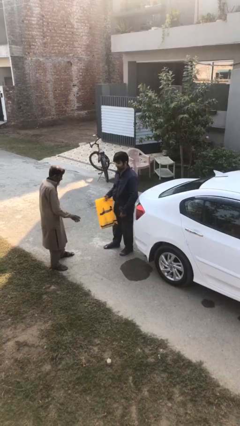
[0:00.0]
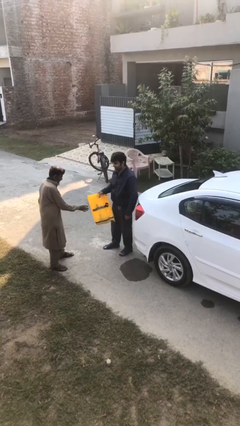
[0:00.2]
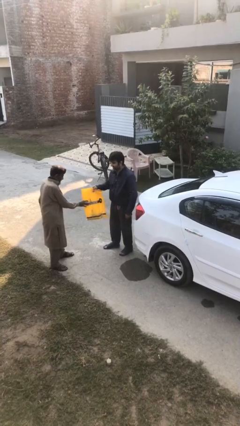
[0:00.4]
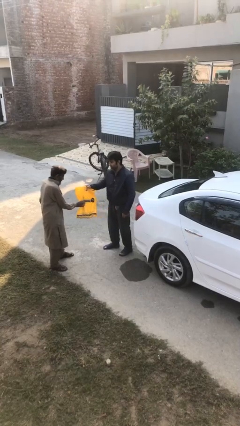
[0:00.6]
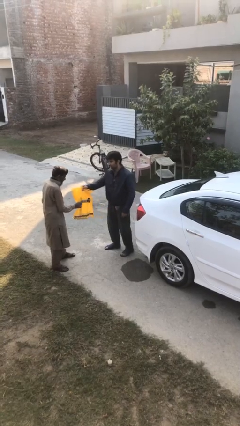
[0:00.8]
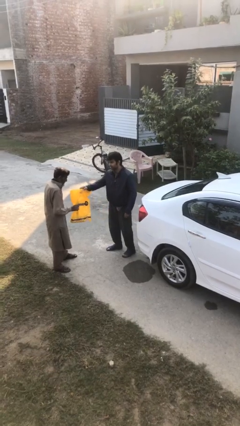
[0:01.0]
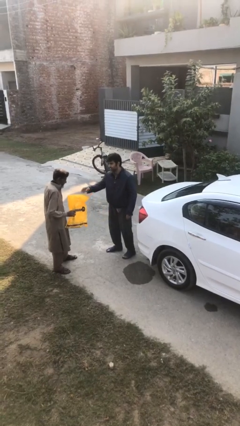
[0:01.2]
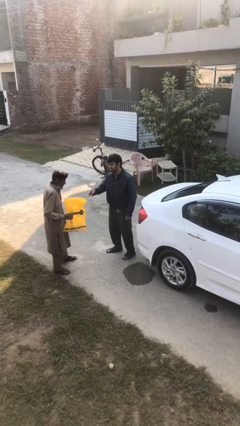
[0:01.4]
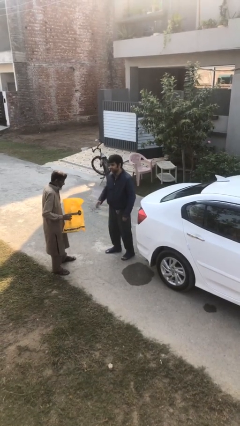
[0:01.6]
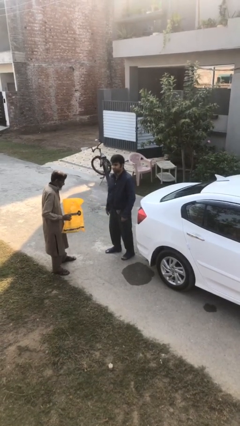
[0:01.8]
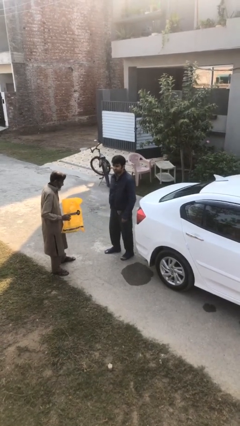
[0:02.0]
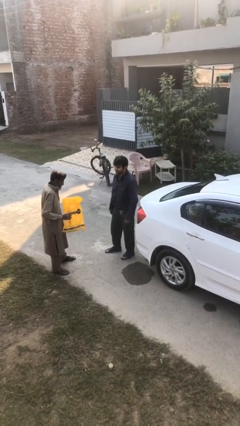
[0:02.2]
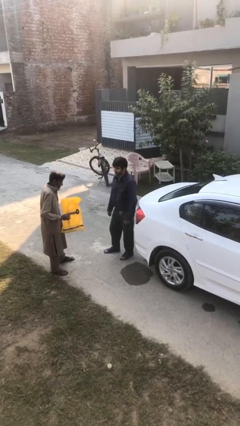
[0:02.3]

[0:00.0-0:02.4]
person transfers object to person

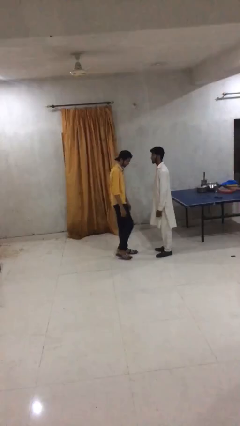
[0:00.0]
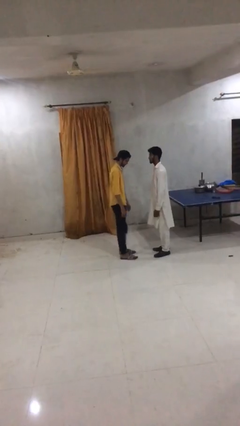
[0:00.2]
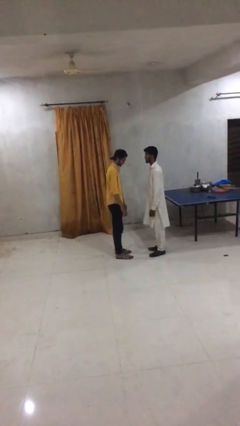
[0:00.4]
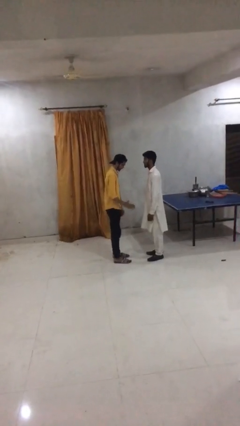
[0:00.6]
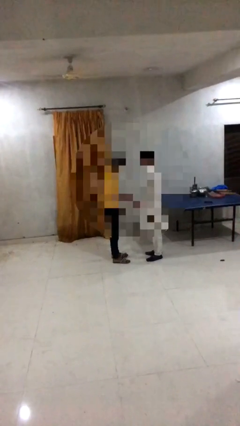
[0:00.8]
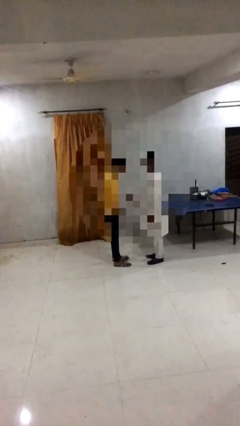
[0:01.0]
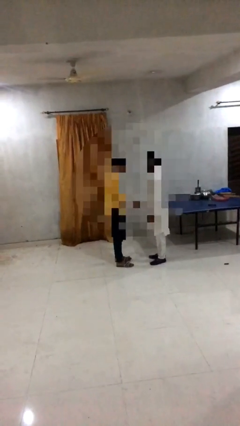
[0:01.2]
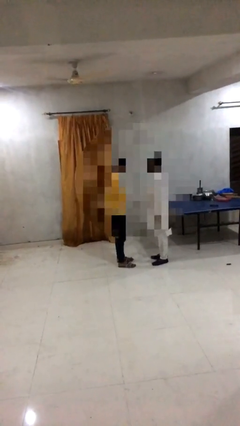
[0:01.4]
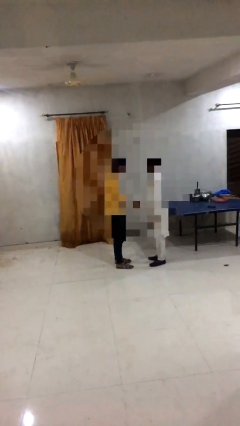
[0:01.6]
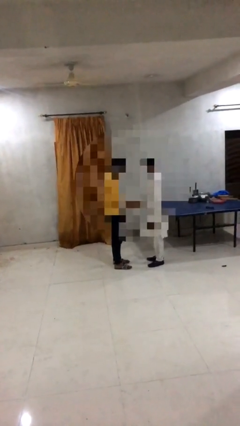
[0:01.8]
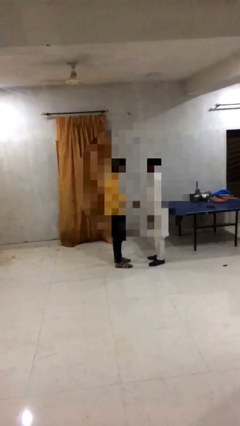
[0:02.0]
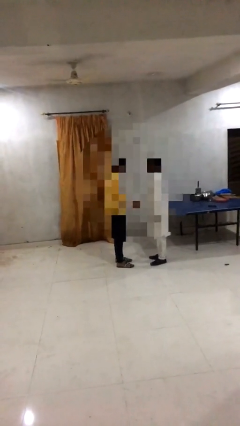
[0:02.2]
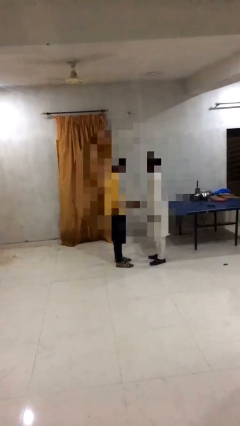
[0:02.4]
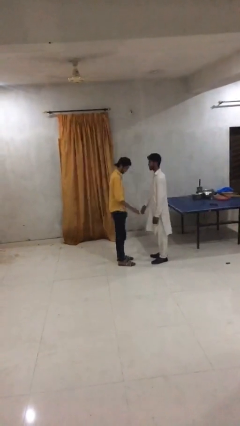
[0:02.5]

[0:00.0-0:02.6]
person shakes hand

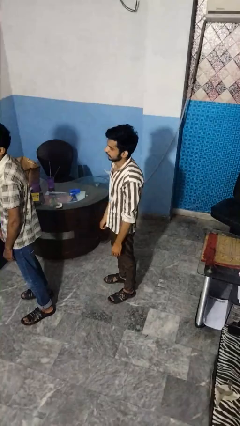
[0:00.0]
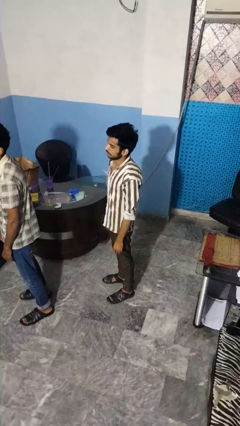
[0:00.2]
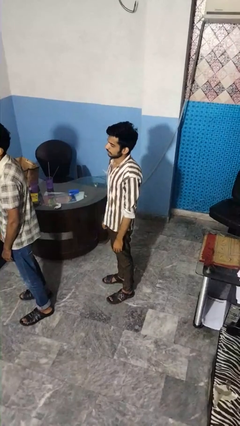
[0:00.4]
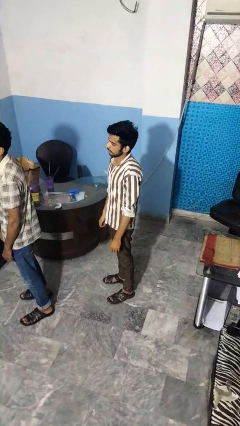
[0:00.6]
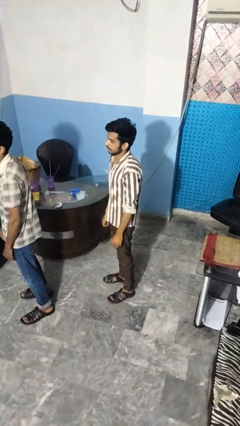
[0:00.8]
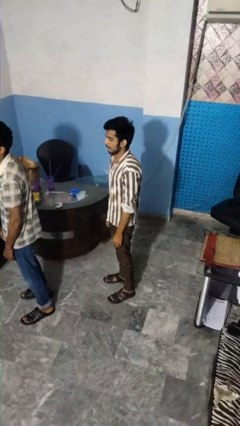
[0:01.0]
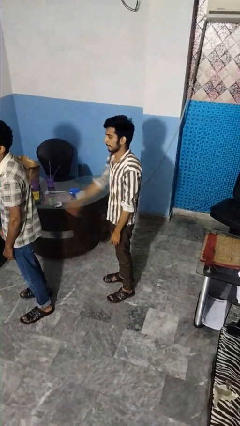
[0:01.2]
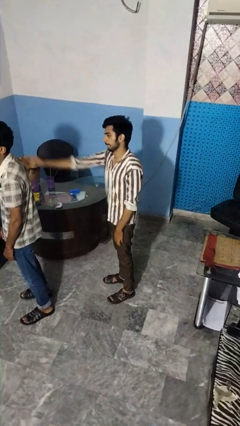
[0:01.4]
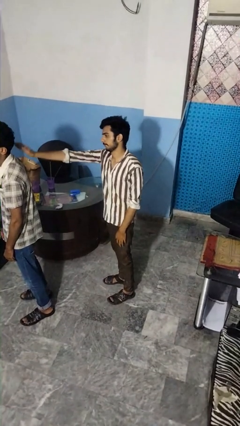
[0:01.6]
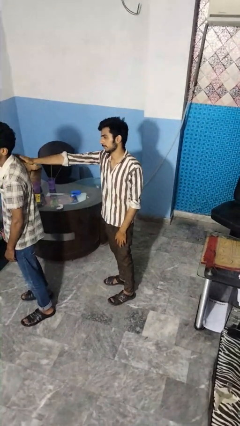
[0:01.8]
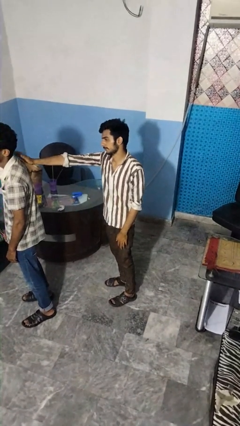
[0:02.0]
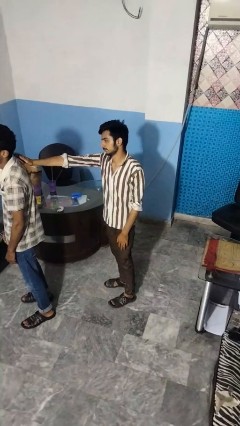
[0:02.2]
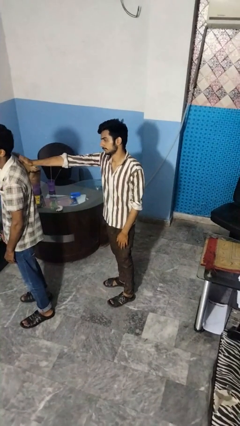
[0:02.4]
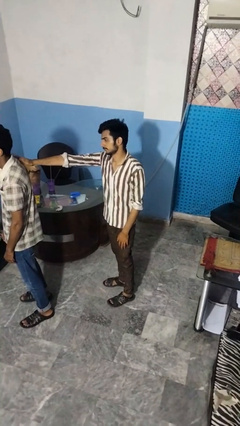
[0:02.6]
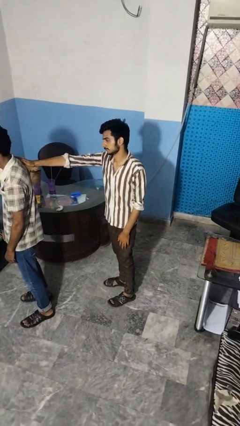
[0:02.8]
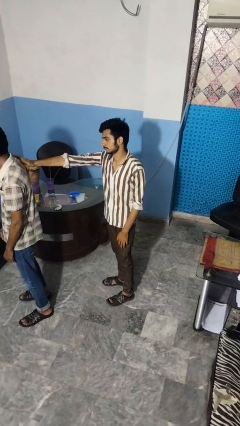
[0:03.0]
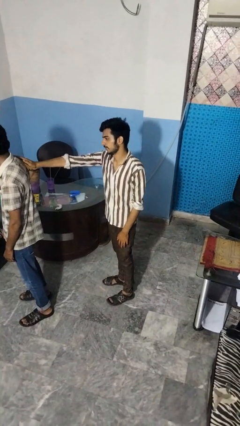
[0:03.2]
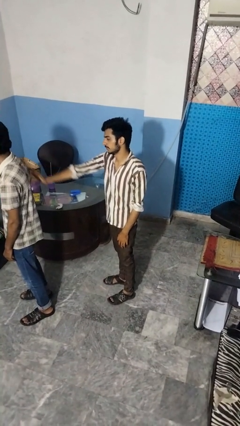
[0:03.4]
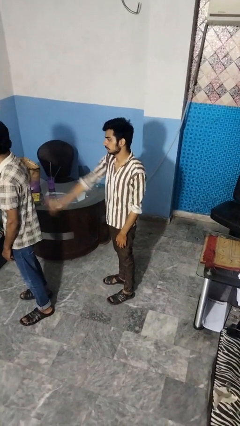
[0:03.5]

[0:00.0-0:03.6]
person touches back of person

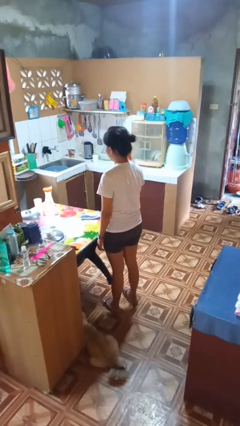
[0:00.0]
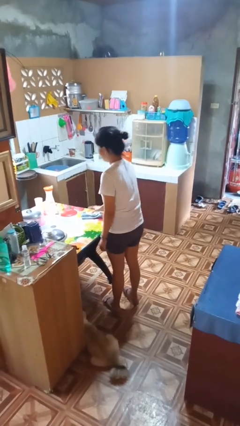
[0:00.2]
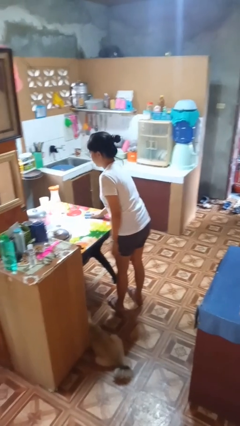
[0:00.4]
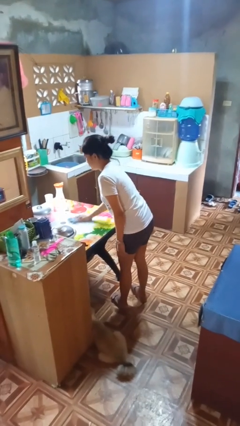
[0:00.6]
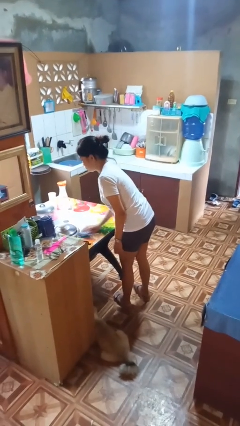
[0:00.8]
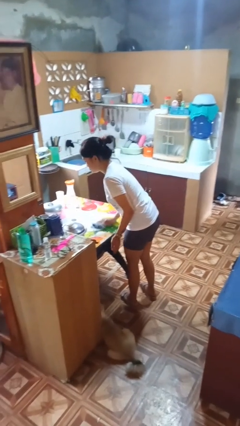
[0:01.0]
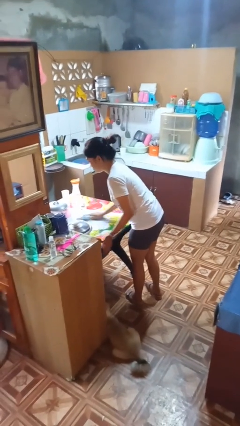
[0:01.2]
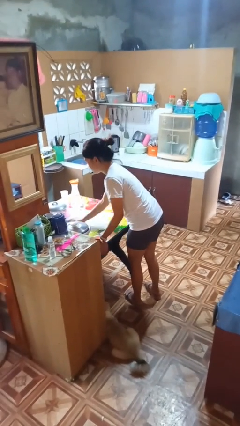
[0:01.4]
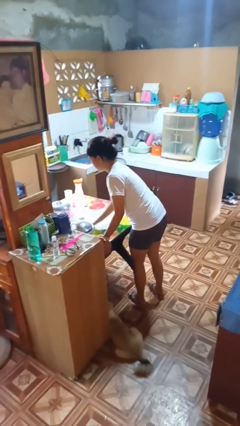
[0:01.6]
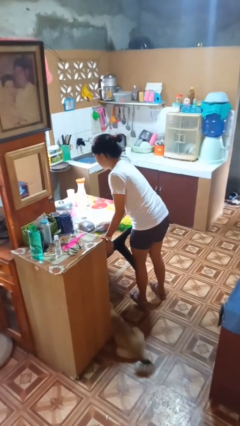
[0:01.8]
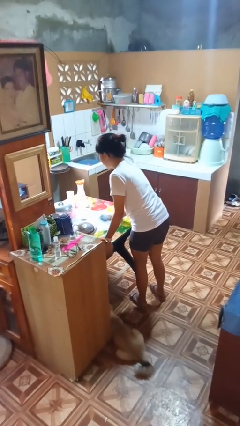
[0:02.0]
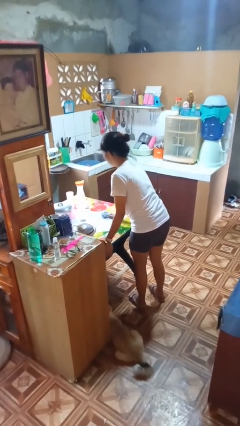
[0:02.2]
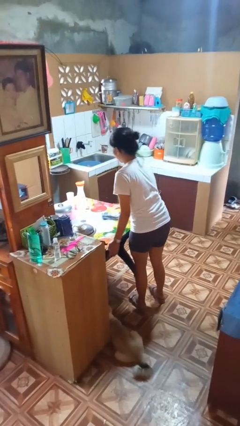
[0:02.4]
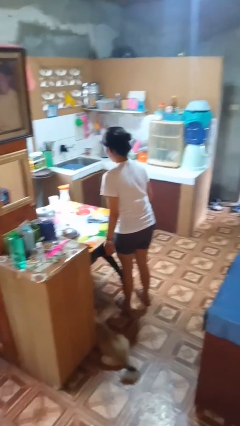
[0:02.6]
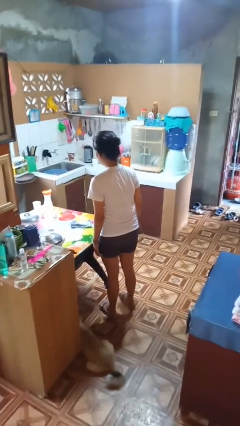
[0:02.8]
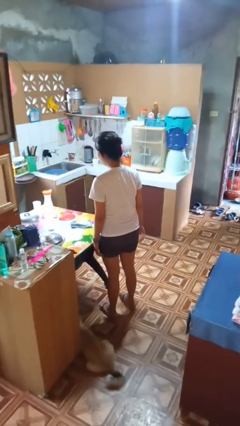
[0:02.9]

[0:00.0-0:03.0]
person cleans table with rag

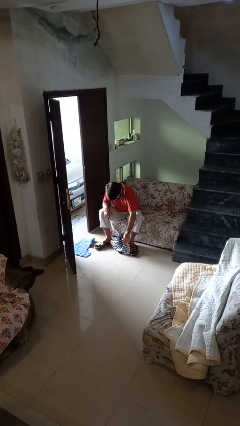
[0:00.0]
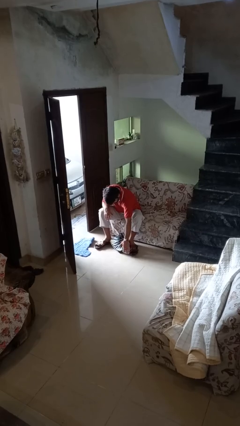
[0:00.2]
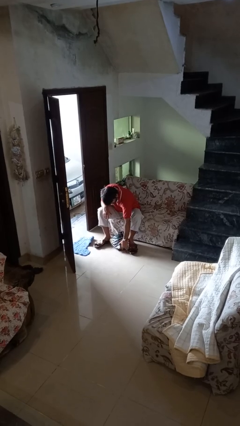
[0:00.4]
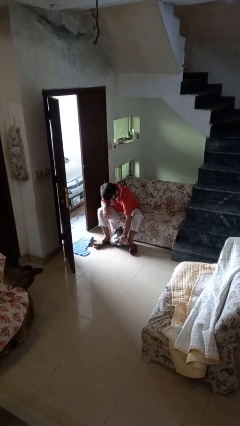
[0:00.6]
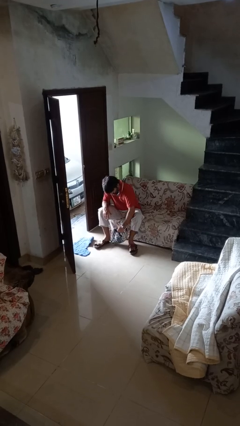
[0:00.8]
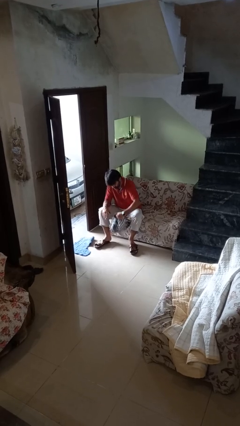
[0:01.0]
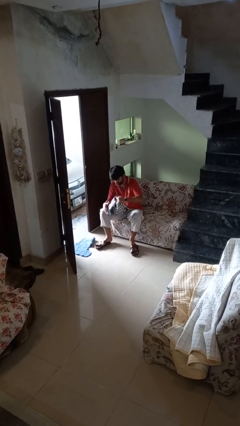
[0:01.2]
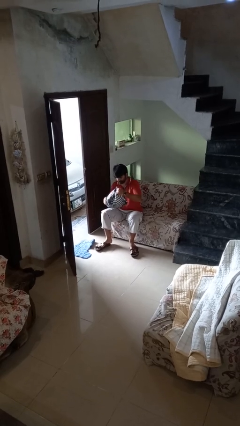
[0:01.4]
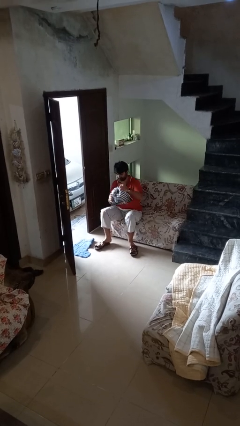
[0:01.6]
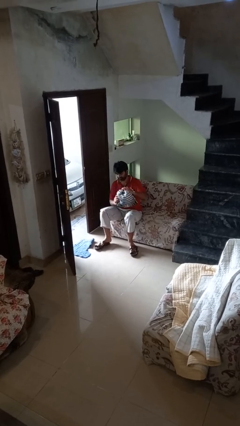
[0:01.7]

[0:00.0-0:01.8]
person picks up object from floor

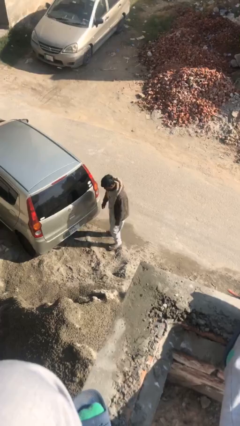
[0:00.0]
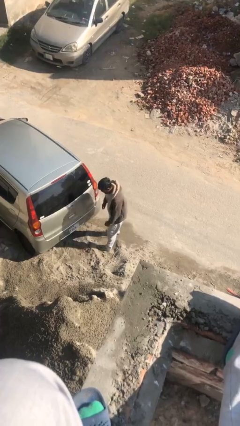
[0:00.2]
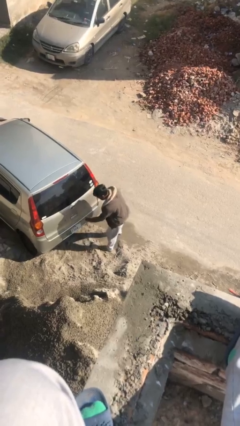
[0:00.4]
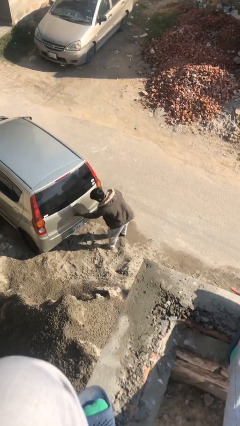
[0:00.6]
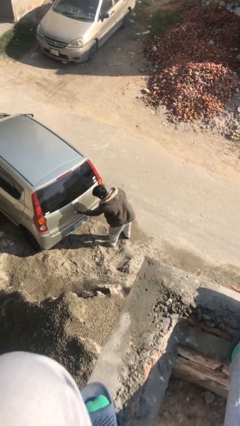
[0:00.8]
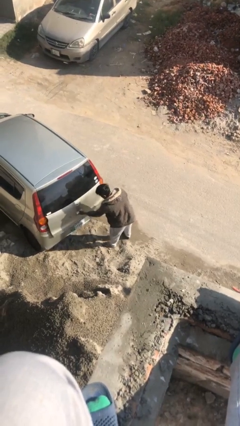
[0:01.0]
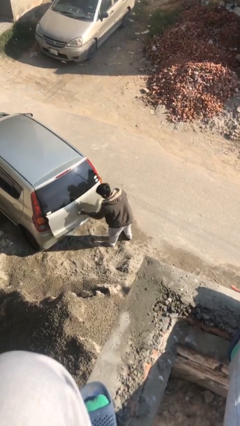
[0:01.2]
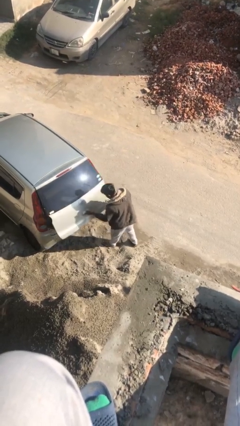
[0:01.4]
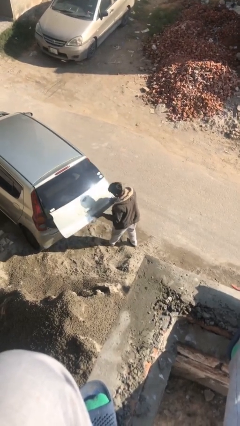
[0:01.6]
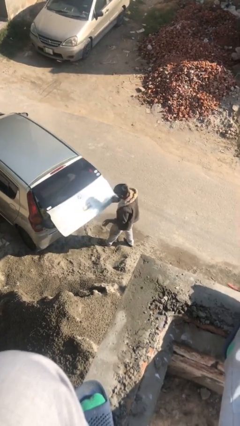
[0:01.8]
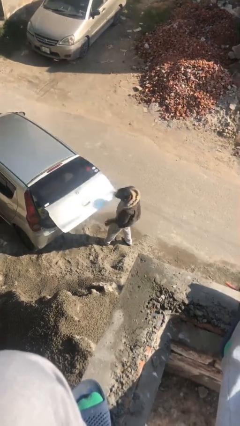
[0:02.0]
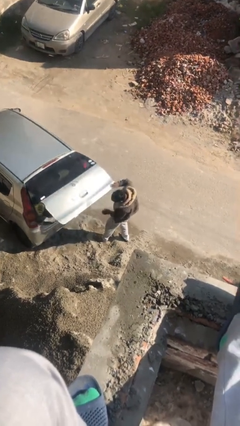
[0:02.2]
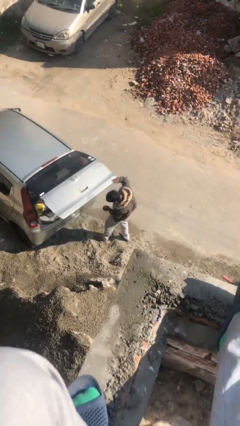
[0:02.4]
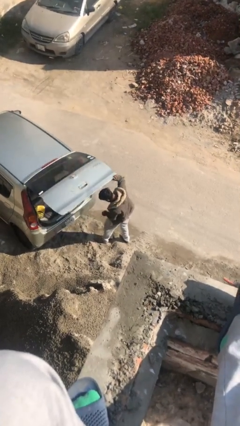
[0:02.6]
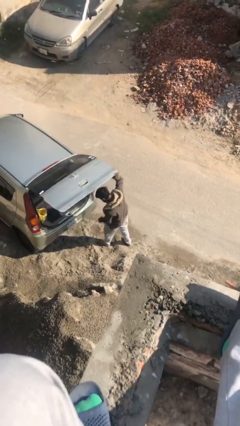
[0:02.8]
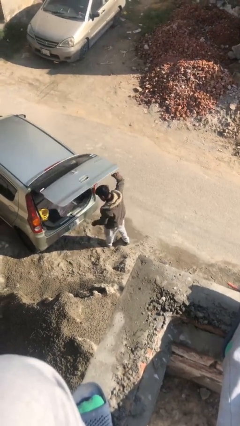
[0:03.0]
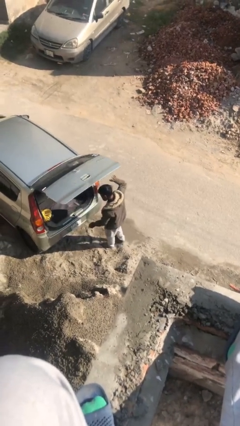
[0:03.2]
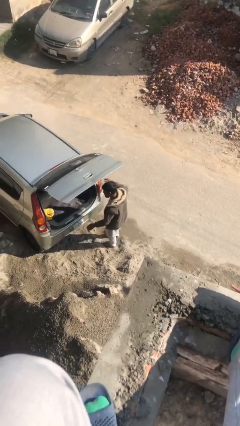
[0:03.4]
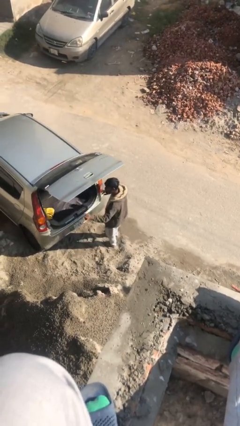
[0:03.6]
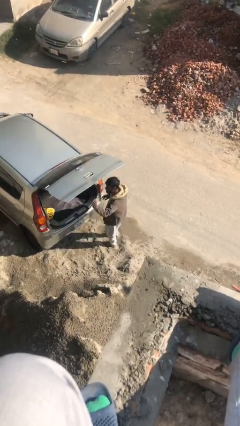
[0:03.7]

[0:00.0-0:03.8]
person opens car trunk
